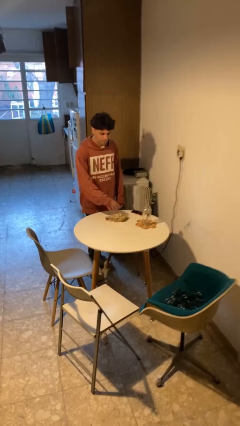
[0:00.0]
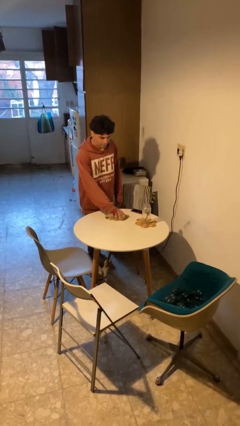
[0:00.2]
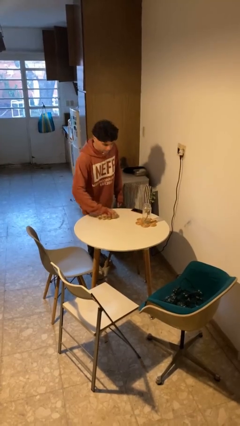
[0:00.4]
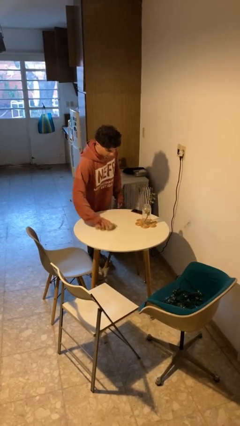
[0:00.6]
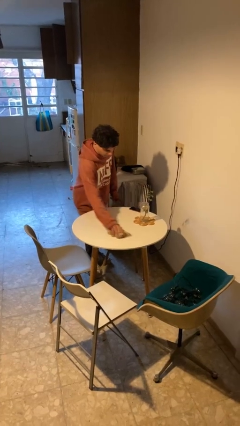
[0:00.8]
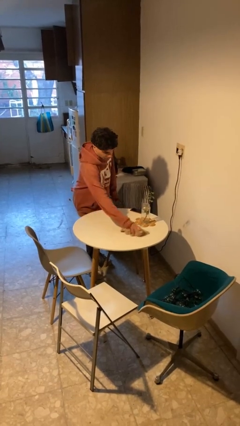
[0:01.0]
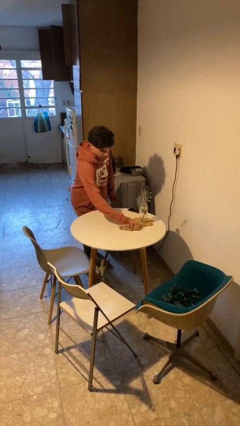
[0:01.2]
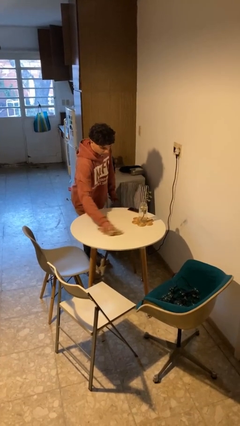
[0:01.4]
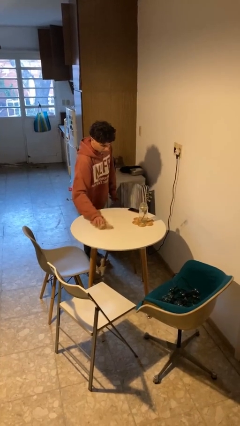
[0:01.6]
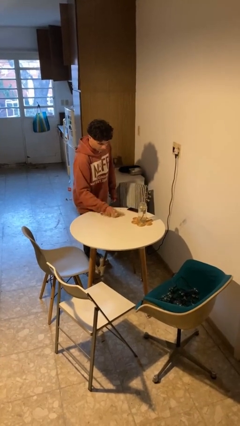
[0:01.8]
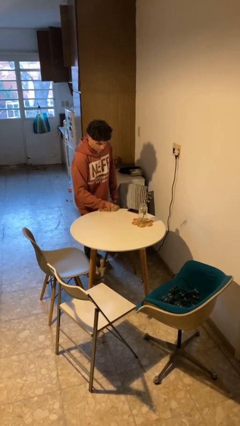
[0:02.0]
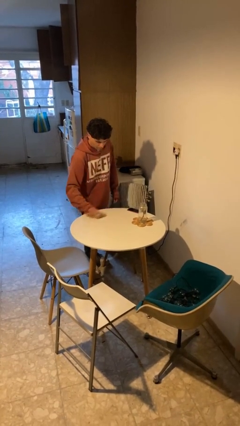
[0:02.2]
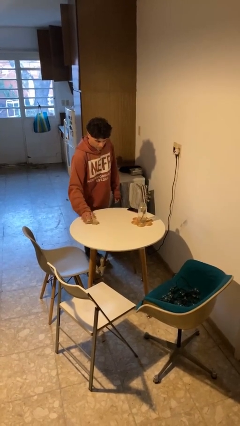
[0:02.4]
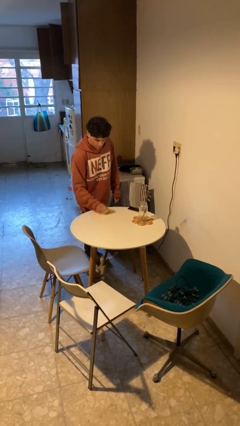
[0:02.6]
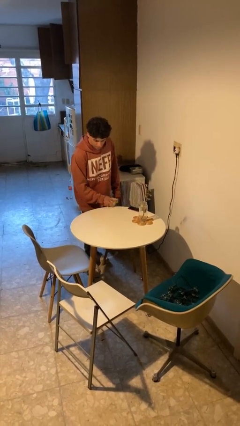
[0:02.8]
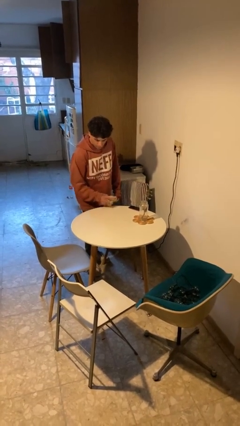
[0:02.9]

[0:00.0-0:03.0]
person cleans table with rag

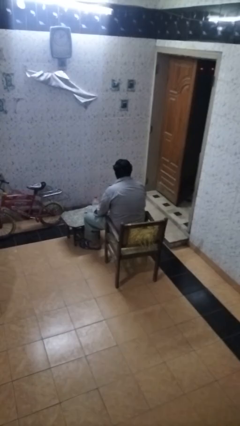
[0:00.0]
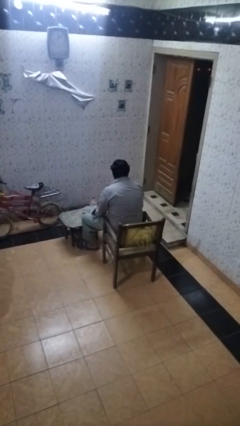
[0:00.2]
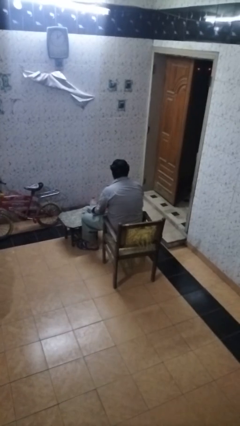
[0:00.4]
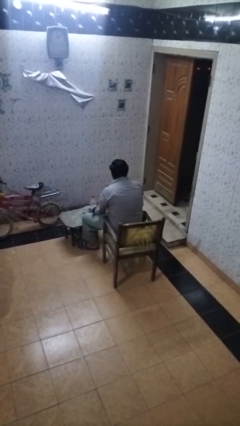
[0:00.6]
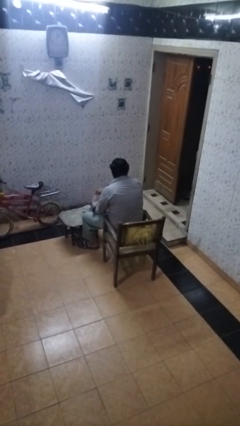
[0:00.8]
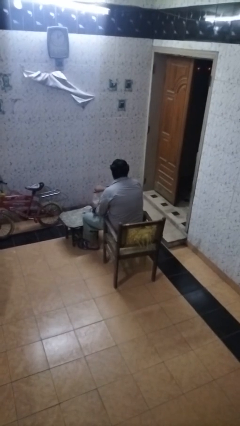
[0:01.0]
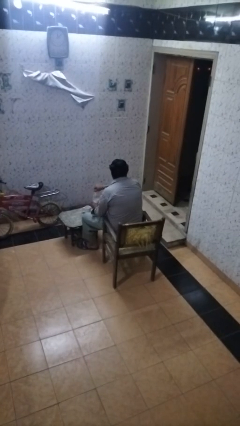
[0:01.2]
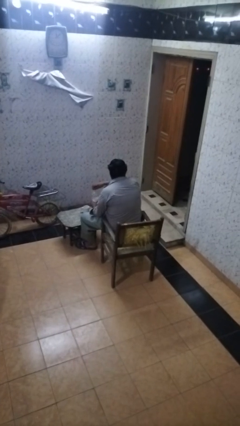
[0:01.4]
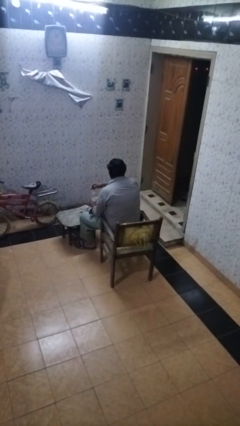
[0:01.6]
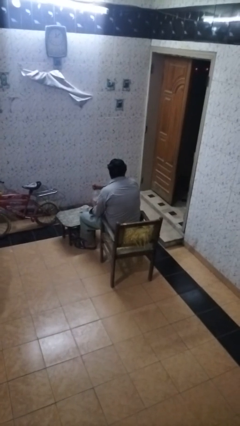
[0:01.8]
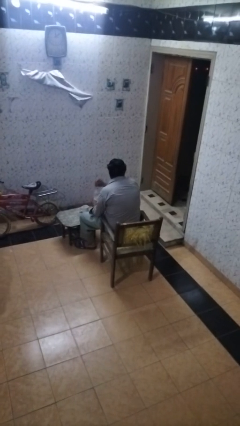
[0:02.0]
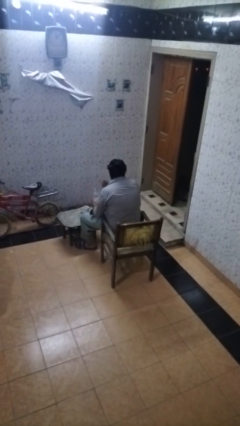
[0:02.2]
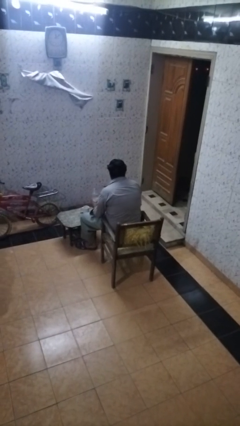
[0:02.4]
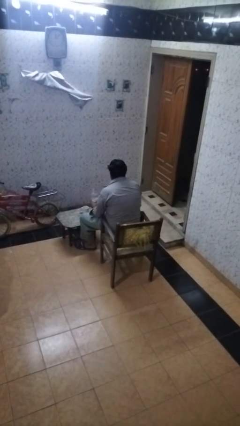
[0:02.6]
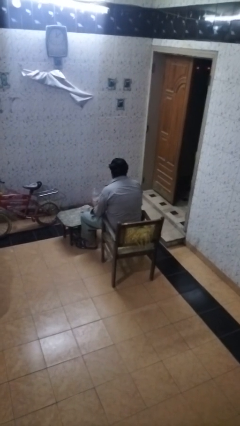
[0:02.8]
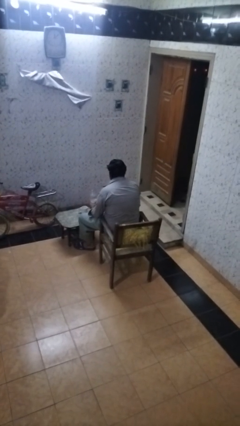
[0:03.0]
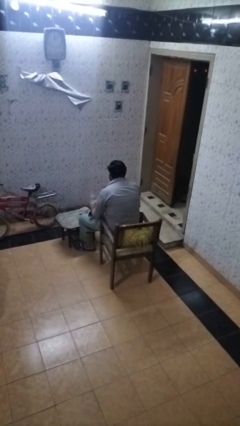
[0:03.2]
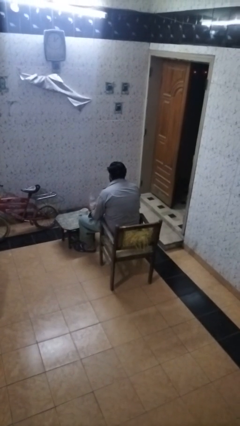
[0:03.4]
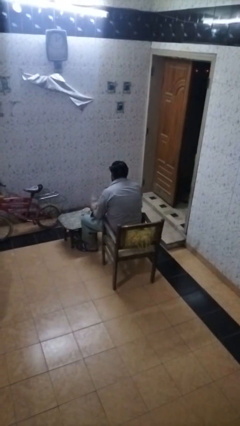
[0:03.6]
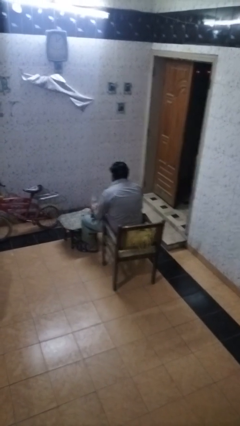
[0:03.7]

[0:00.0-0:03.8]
person unscrews lid from bottle

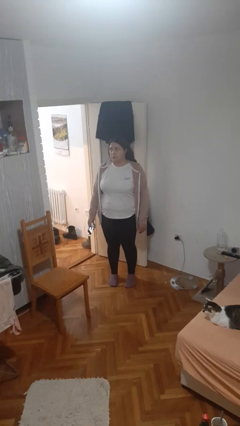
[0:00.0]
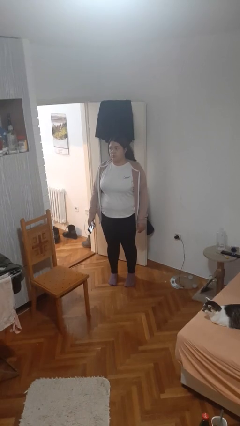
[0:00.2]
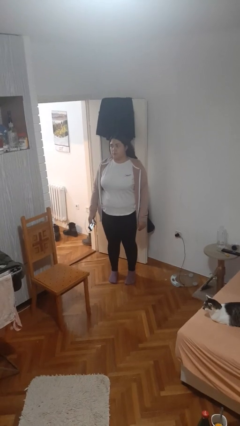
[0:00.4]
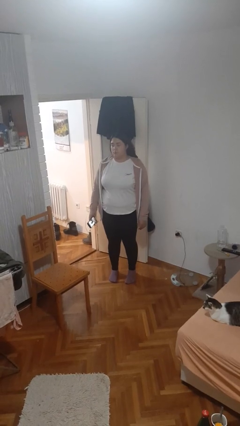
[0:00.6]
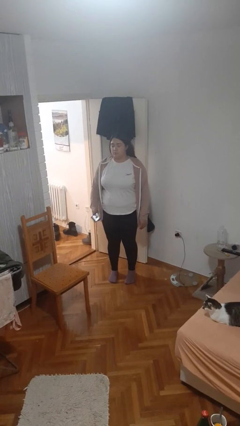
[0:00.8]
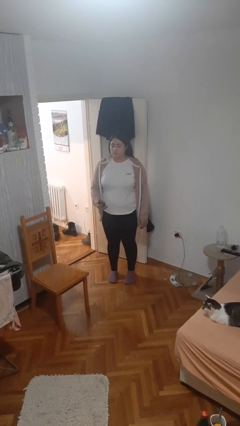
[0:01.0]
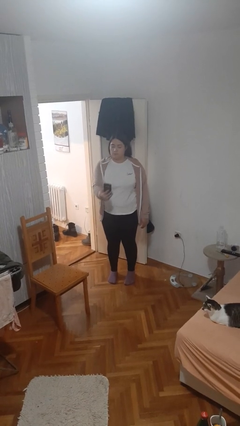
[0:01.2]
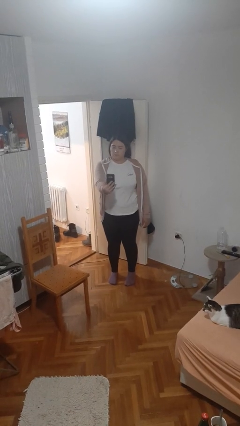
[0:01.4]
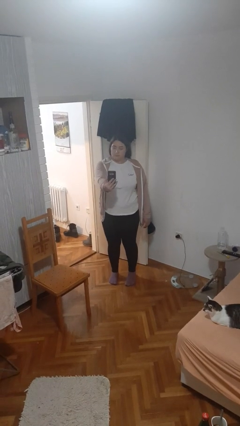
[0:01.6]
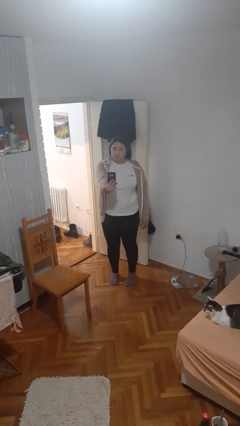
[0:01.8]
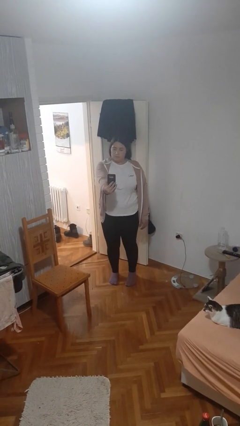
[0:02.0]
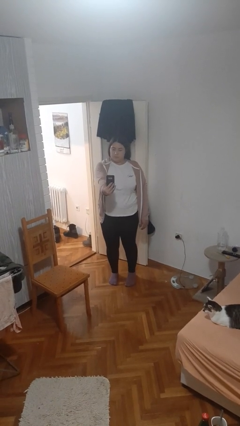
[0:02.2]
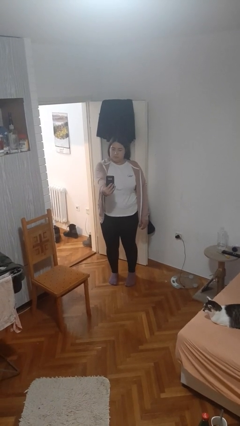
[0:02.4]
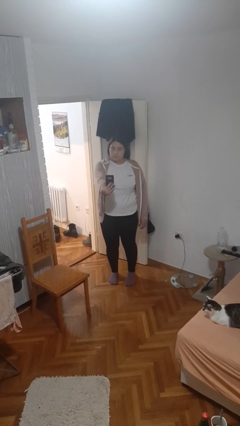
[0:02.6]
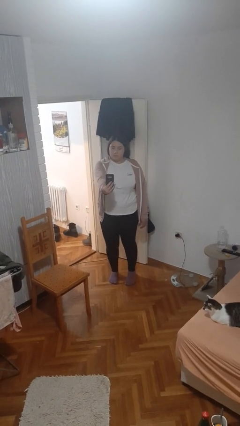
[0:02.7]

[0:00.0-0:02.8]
person takes selfie

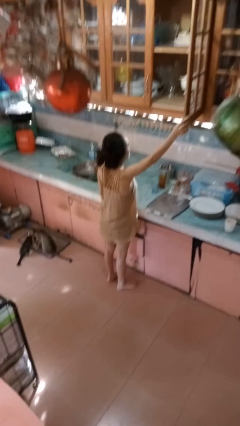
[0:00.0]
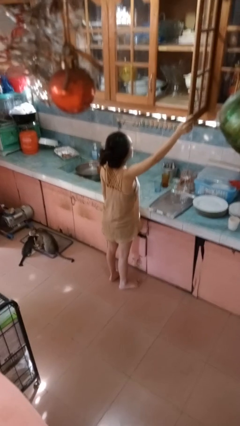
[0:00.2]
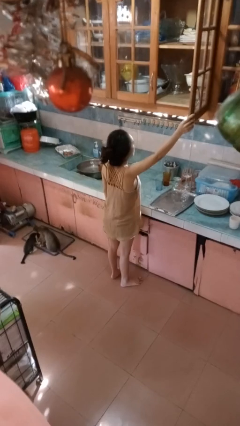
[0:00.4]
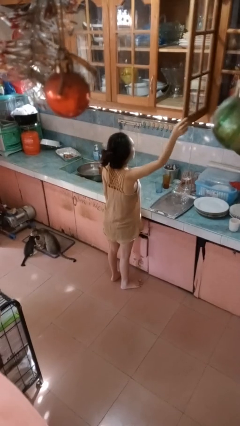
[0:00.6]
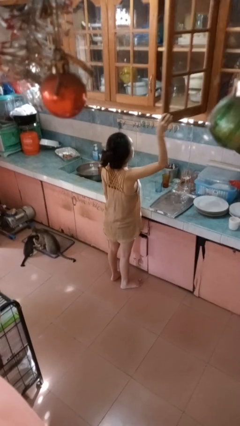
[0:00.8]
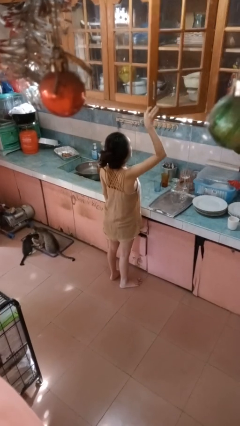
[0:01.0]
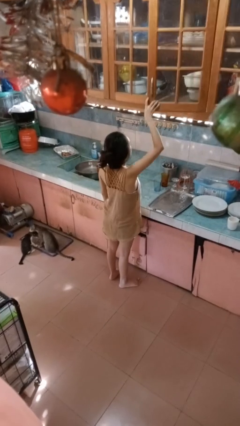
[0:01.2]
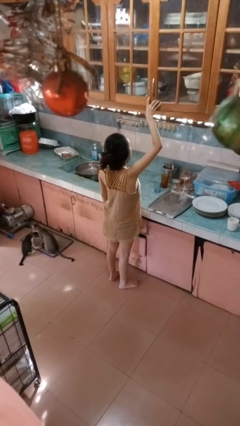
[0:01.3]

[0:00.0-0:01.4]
person closes cabinet

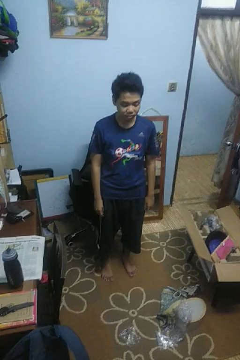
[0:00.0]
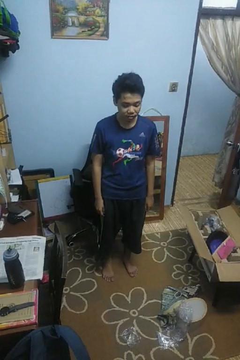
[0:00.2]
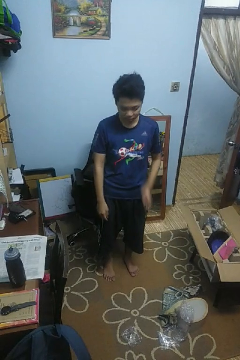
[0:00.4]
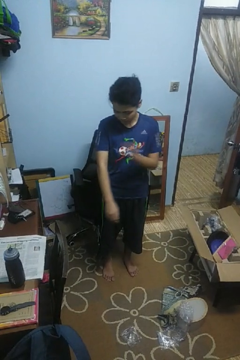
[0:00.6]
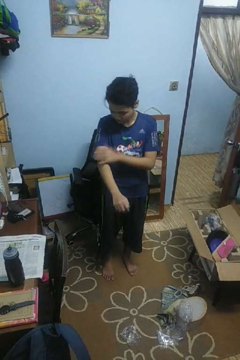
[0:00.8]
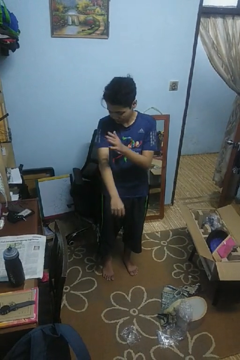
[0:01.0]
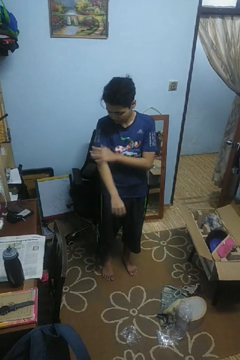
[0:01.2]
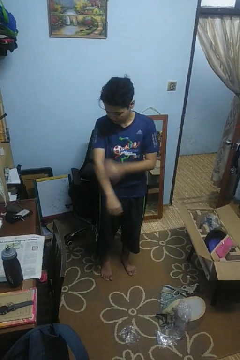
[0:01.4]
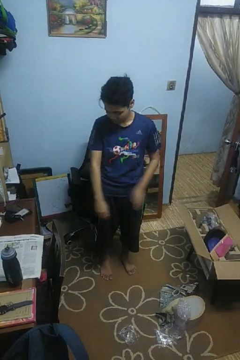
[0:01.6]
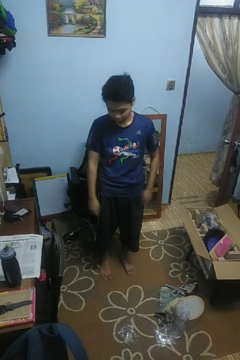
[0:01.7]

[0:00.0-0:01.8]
person swats bug

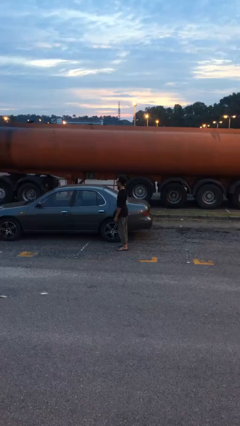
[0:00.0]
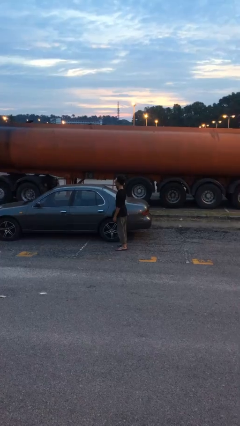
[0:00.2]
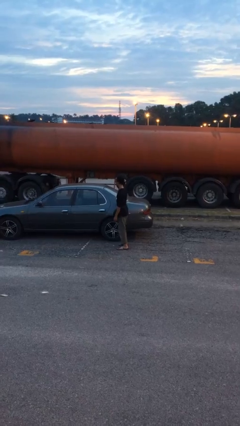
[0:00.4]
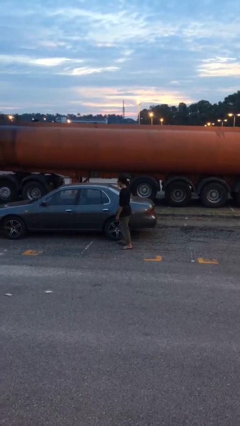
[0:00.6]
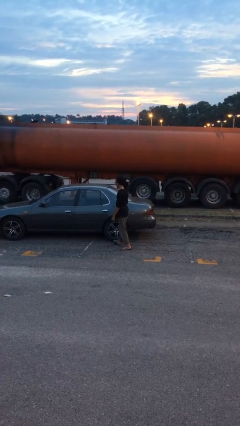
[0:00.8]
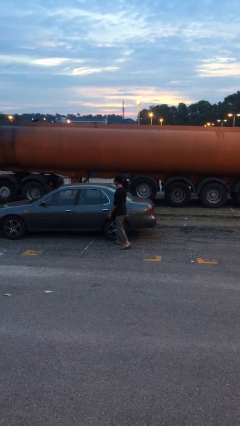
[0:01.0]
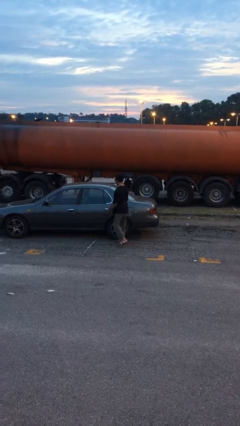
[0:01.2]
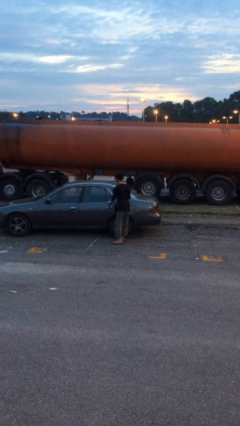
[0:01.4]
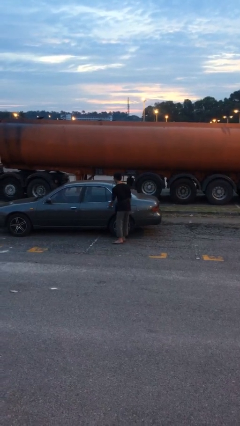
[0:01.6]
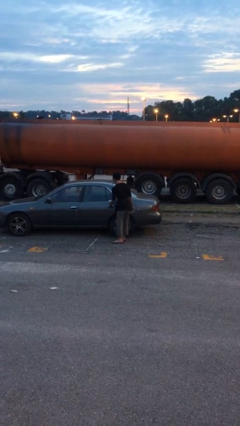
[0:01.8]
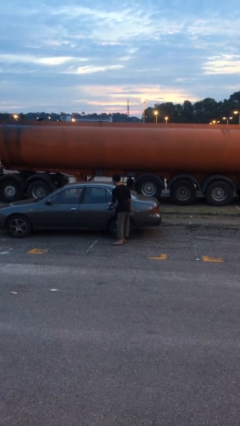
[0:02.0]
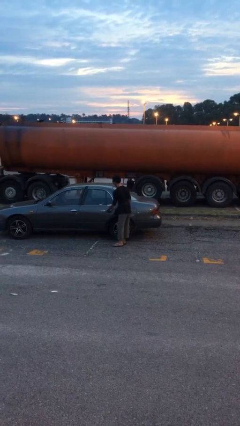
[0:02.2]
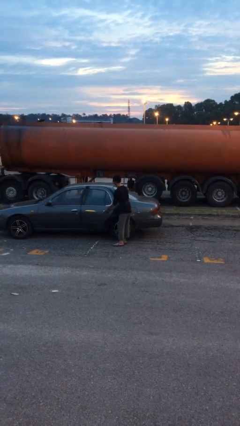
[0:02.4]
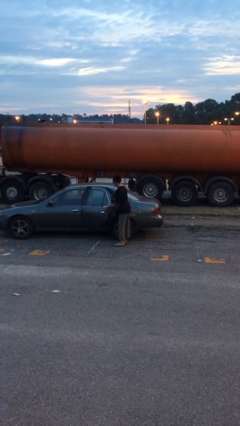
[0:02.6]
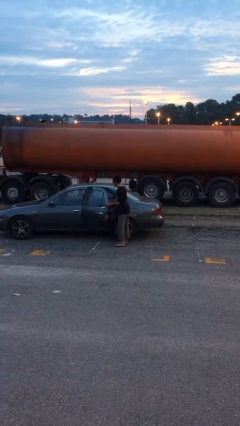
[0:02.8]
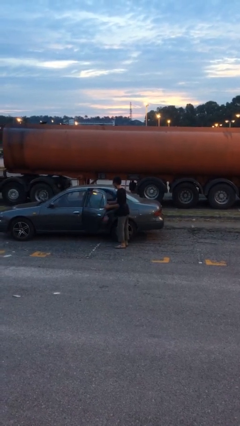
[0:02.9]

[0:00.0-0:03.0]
person opens car door

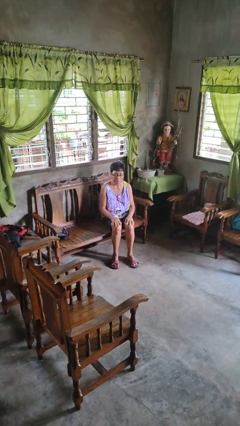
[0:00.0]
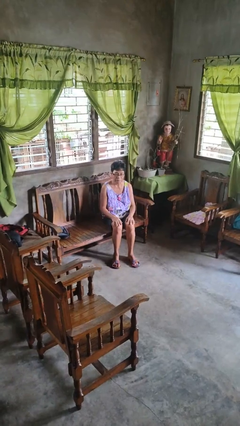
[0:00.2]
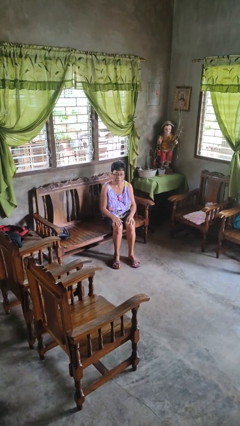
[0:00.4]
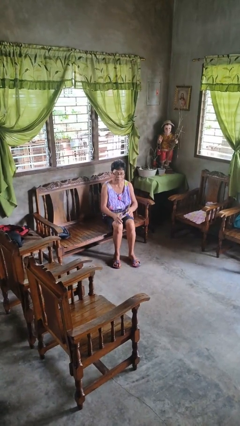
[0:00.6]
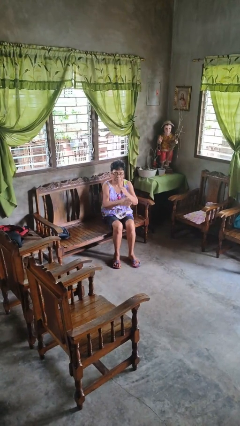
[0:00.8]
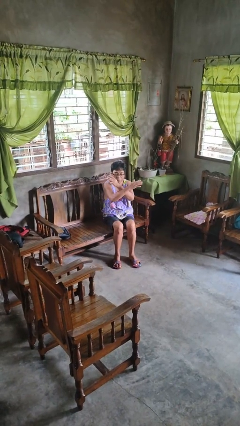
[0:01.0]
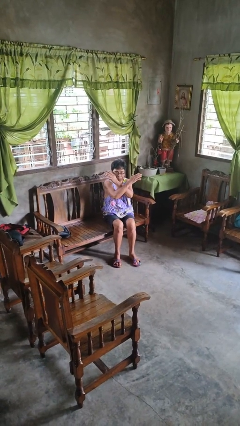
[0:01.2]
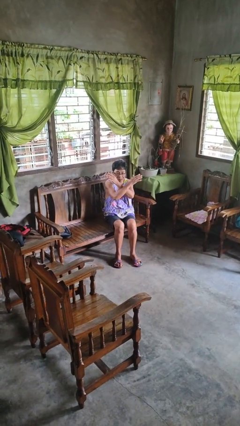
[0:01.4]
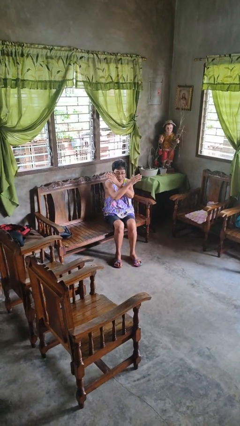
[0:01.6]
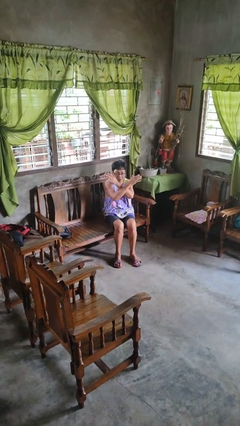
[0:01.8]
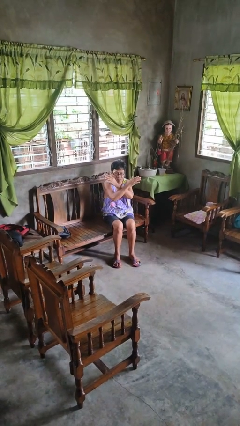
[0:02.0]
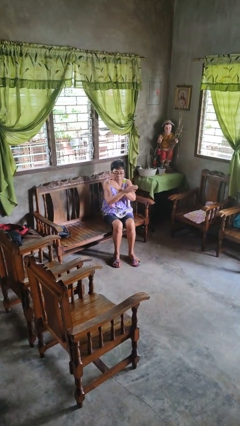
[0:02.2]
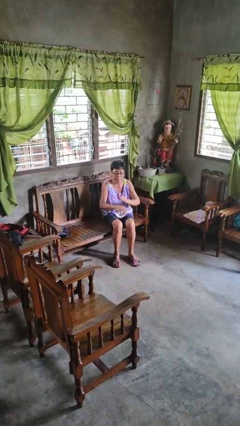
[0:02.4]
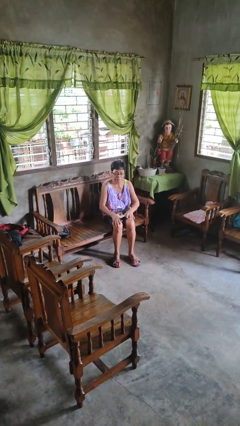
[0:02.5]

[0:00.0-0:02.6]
person gestures arms x
